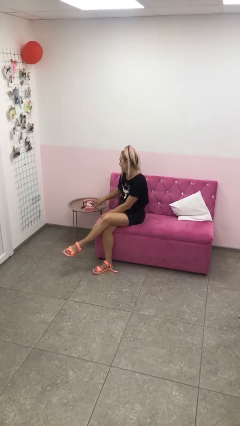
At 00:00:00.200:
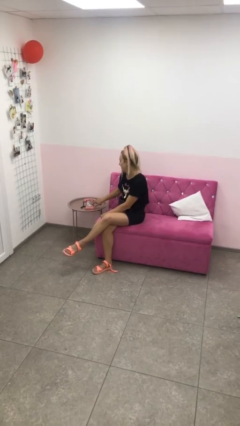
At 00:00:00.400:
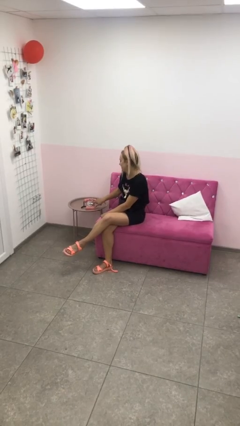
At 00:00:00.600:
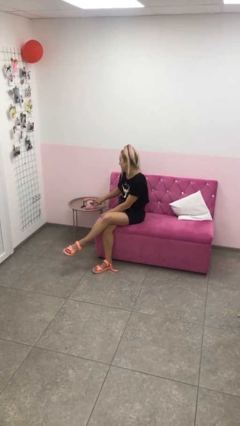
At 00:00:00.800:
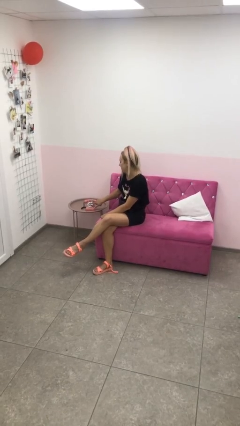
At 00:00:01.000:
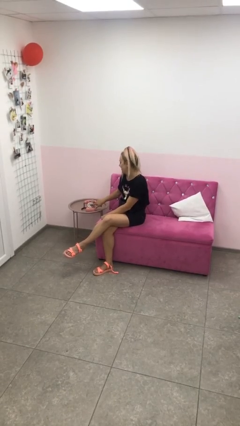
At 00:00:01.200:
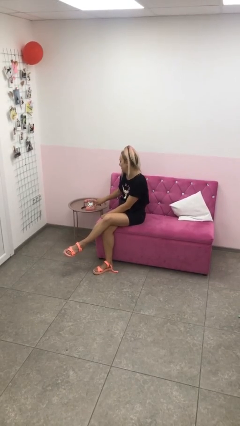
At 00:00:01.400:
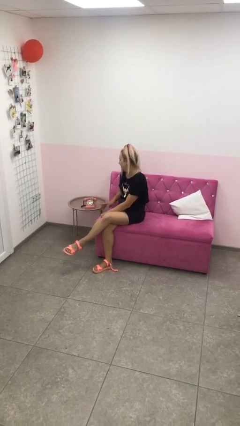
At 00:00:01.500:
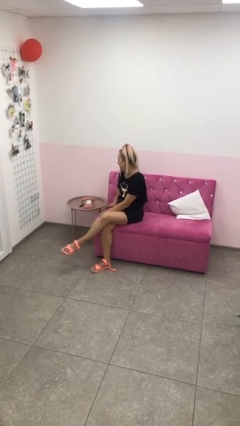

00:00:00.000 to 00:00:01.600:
person taps object with finger

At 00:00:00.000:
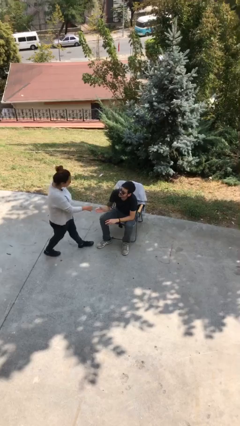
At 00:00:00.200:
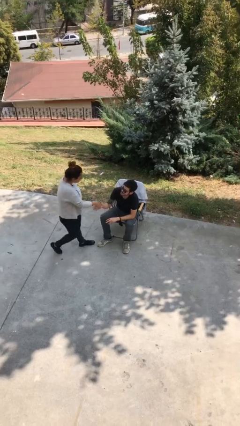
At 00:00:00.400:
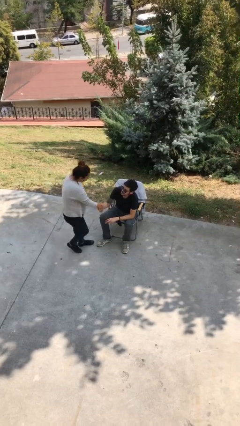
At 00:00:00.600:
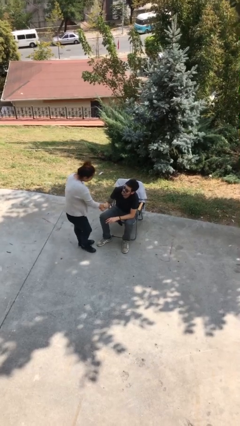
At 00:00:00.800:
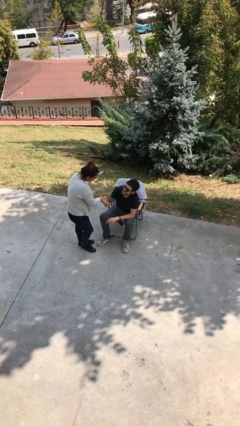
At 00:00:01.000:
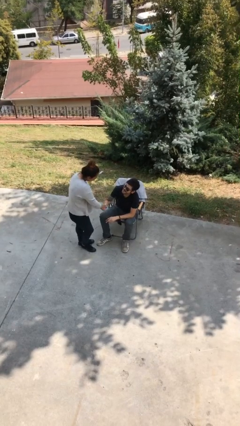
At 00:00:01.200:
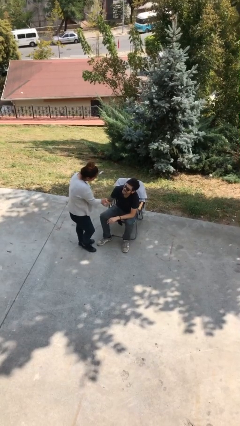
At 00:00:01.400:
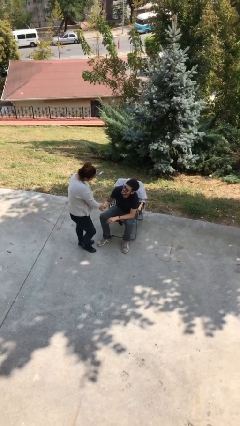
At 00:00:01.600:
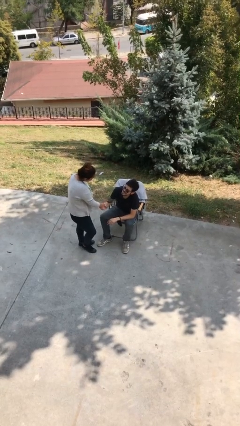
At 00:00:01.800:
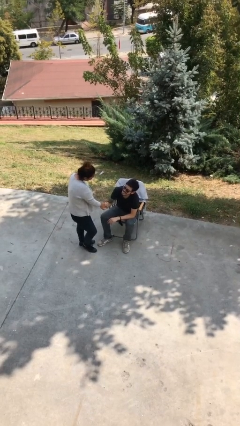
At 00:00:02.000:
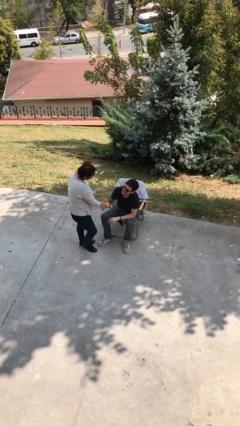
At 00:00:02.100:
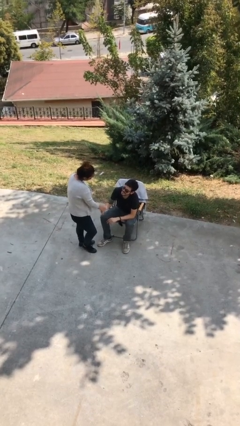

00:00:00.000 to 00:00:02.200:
person shakes hand

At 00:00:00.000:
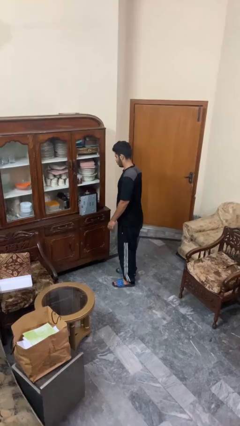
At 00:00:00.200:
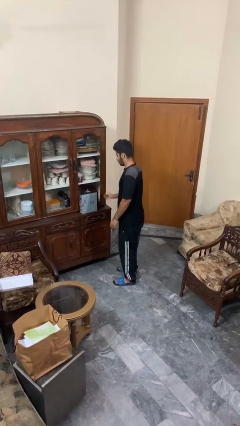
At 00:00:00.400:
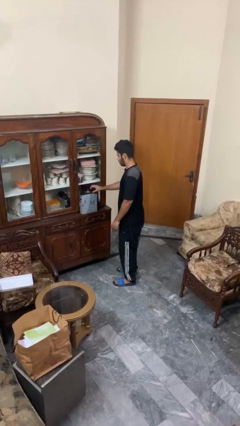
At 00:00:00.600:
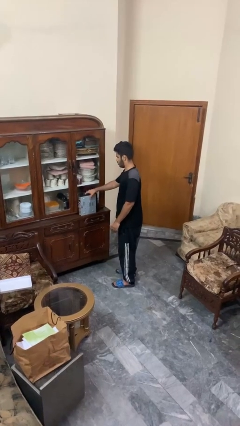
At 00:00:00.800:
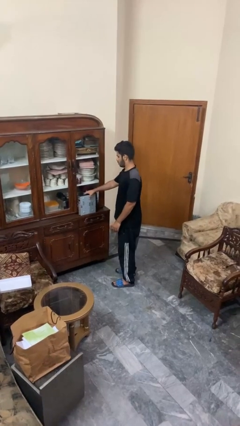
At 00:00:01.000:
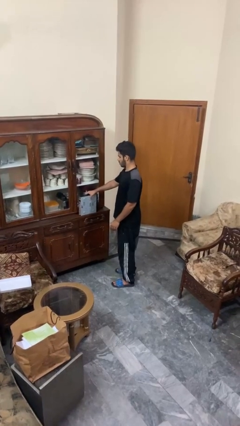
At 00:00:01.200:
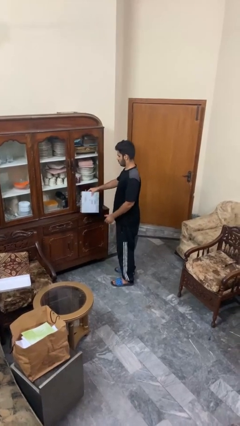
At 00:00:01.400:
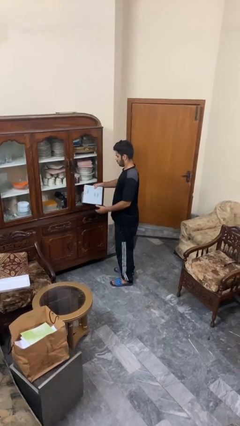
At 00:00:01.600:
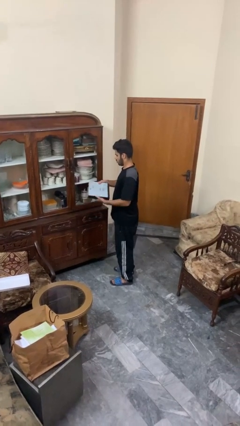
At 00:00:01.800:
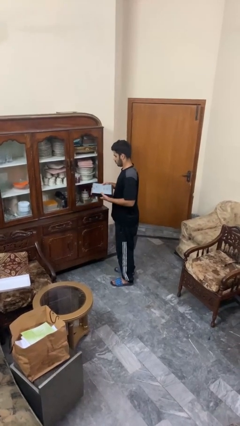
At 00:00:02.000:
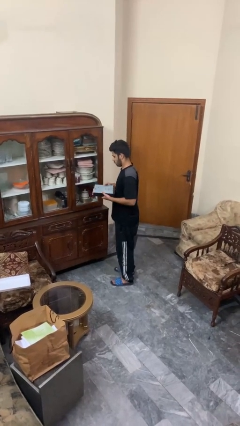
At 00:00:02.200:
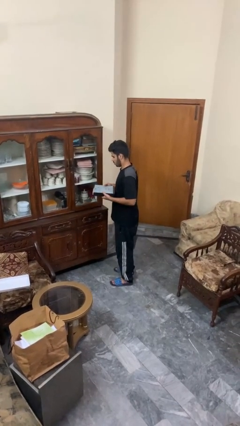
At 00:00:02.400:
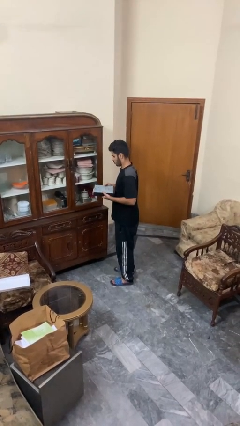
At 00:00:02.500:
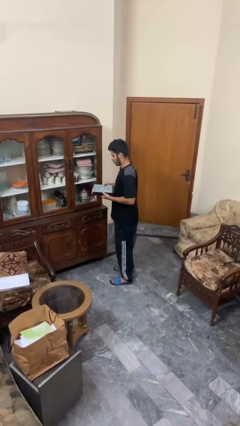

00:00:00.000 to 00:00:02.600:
person picks up object from countertop

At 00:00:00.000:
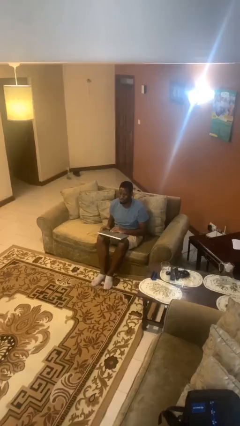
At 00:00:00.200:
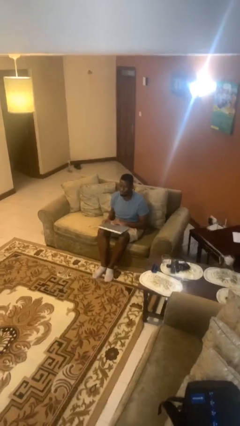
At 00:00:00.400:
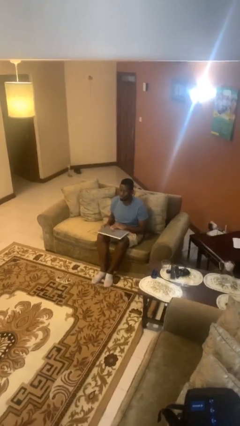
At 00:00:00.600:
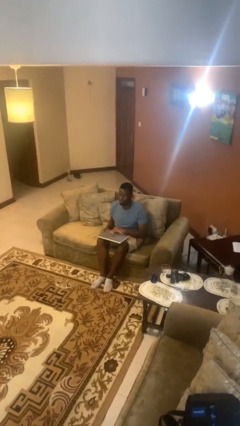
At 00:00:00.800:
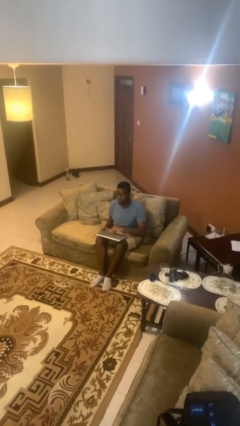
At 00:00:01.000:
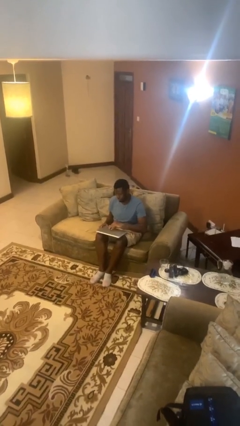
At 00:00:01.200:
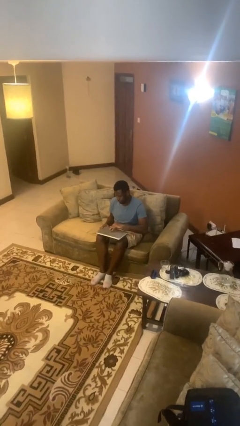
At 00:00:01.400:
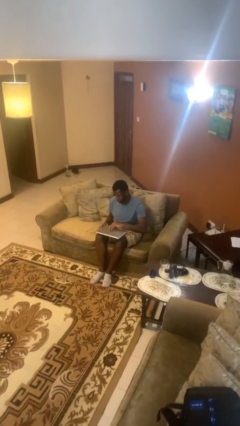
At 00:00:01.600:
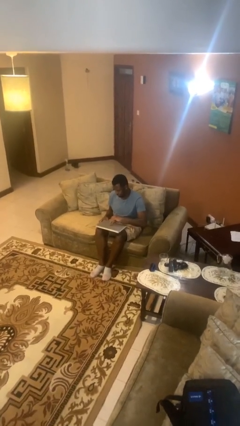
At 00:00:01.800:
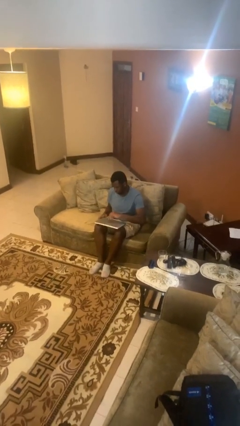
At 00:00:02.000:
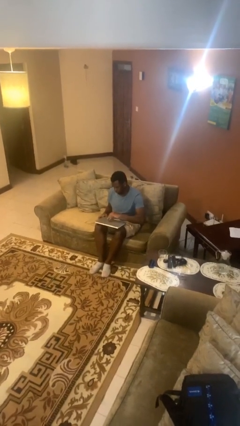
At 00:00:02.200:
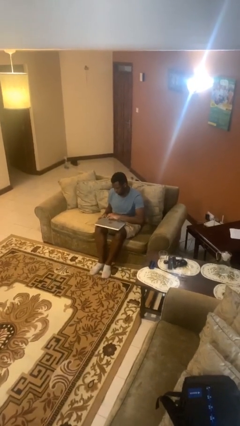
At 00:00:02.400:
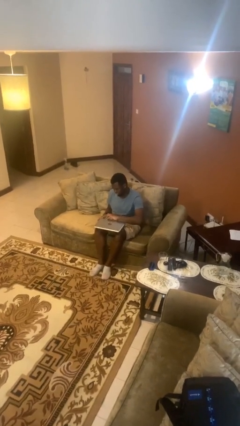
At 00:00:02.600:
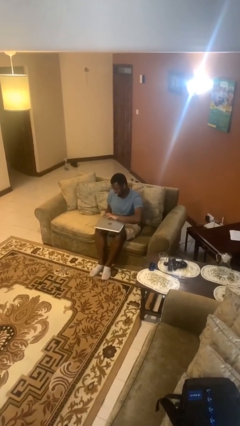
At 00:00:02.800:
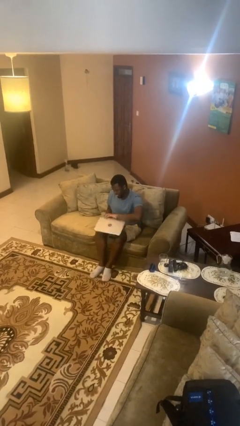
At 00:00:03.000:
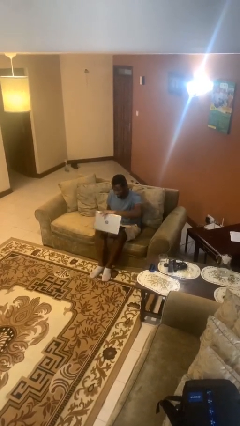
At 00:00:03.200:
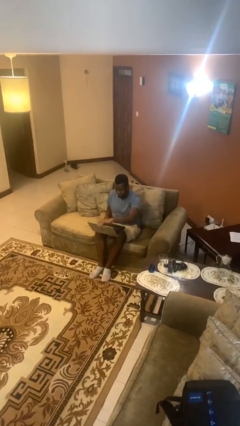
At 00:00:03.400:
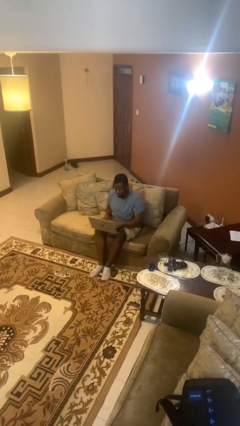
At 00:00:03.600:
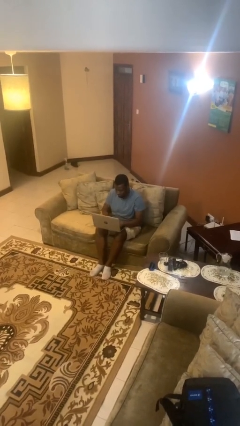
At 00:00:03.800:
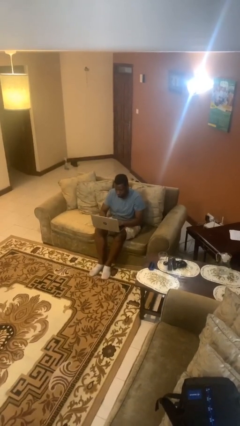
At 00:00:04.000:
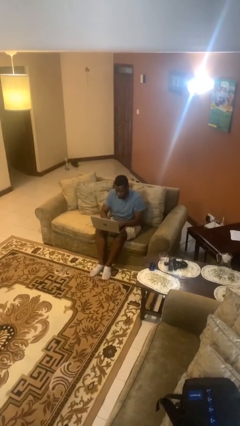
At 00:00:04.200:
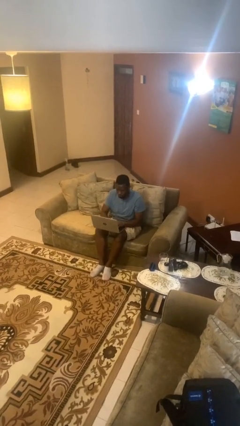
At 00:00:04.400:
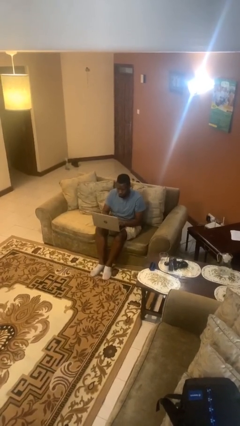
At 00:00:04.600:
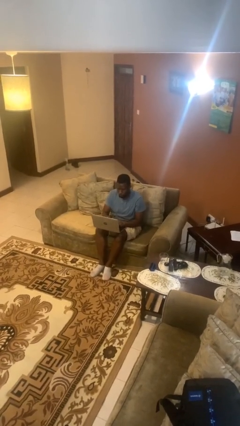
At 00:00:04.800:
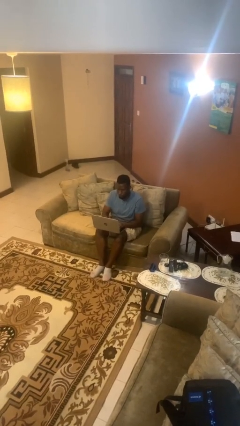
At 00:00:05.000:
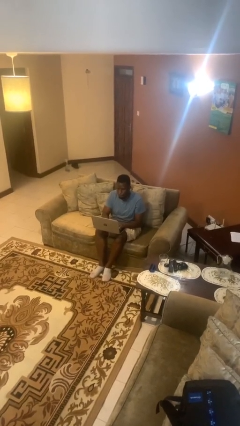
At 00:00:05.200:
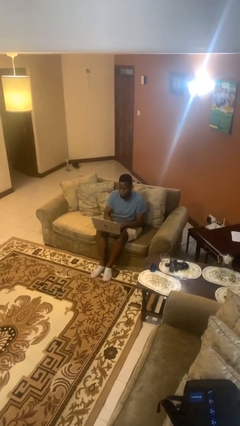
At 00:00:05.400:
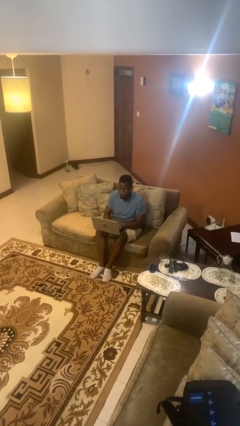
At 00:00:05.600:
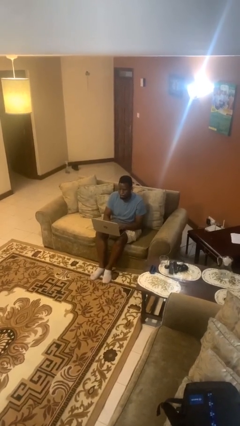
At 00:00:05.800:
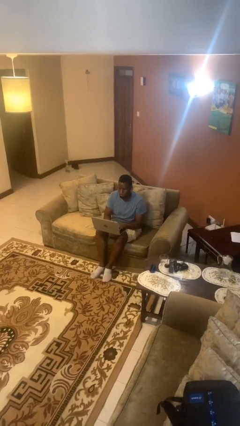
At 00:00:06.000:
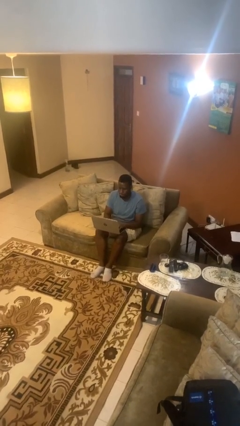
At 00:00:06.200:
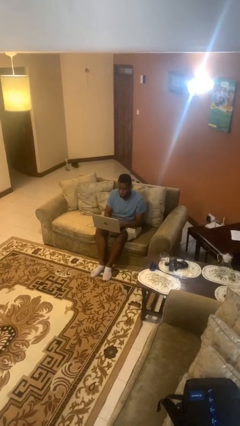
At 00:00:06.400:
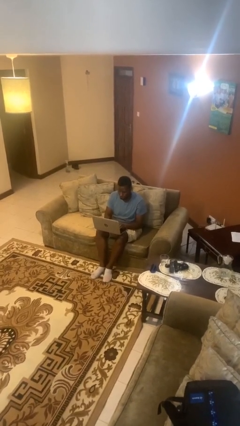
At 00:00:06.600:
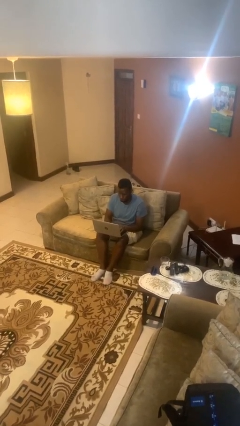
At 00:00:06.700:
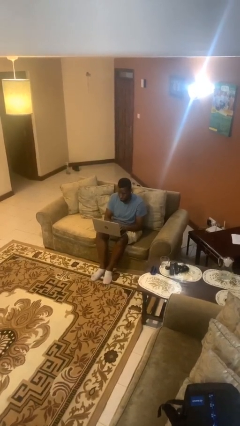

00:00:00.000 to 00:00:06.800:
person interacts with laptop

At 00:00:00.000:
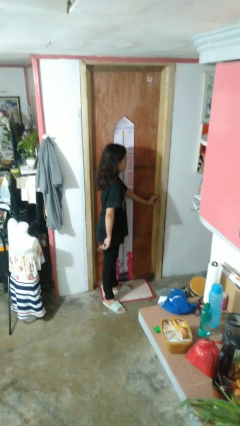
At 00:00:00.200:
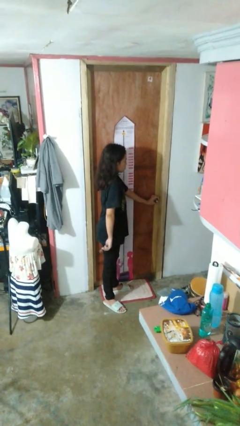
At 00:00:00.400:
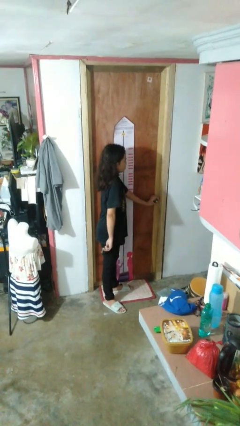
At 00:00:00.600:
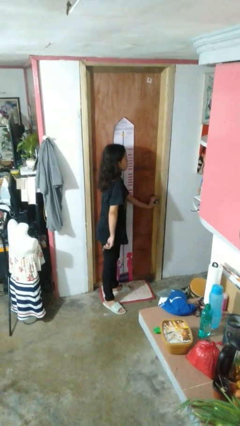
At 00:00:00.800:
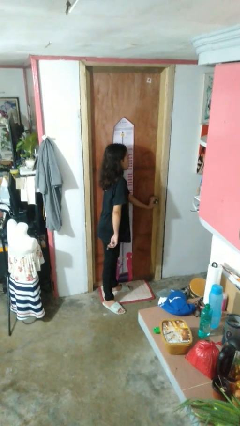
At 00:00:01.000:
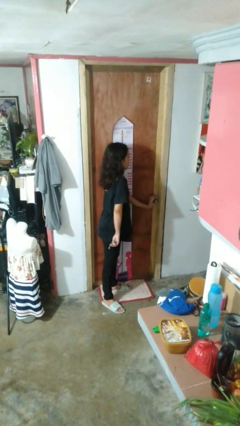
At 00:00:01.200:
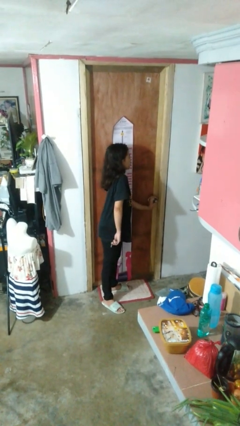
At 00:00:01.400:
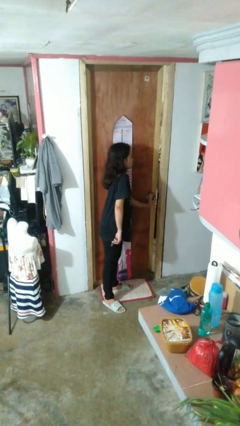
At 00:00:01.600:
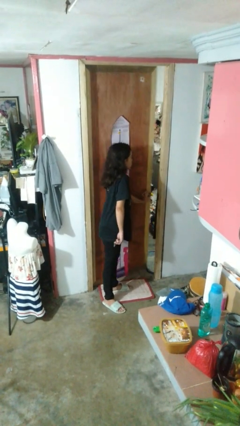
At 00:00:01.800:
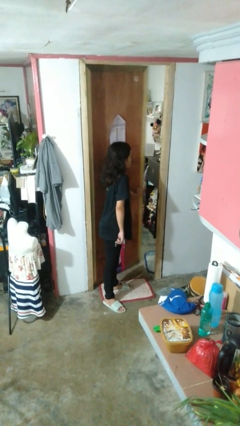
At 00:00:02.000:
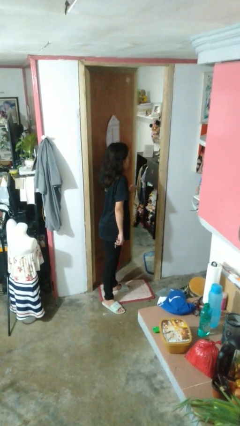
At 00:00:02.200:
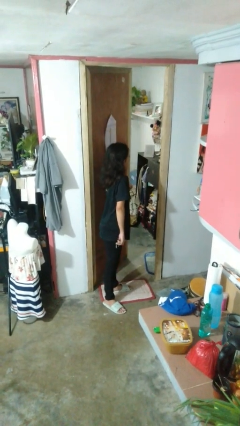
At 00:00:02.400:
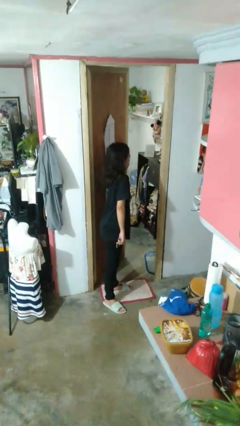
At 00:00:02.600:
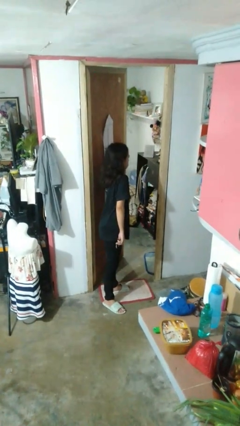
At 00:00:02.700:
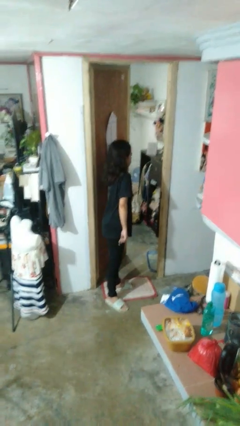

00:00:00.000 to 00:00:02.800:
person opens facility door

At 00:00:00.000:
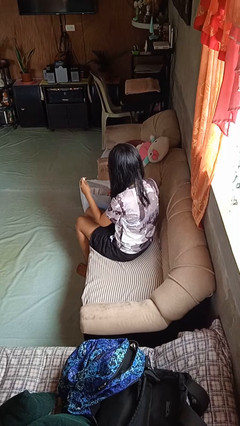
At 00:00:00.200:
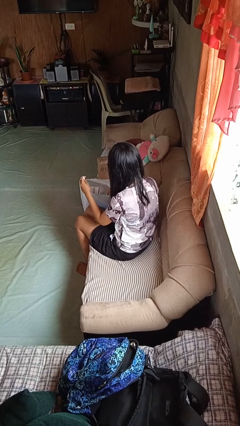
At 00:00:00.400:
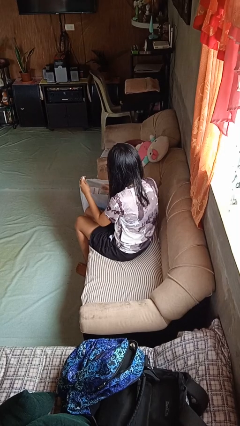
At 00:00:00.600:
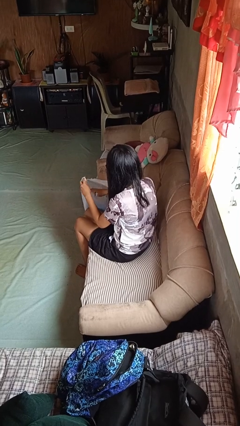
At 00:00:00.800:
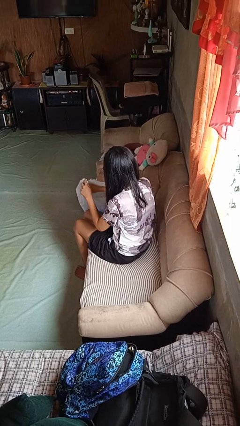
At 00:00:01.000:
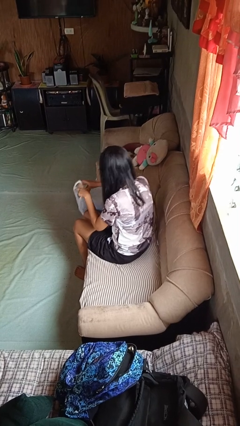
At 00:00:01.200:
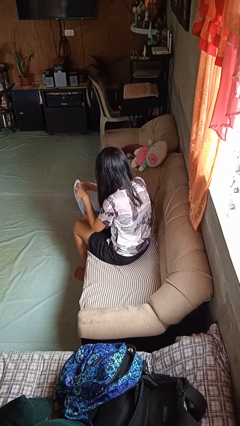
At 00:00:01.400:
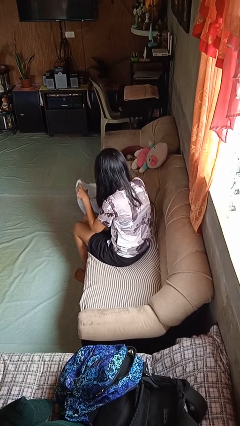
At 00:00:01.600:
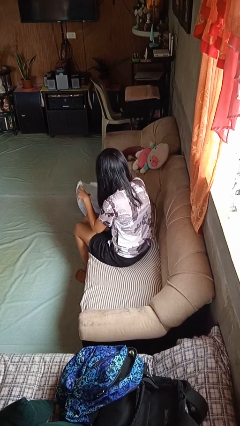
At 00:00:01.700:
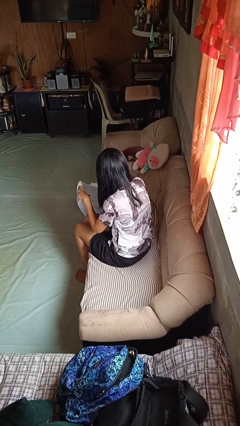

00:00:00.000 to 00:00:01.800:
person searches in bag
